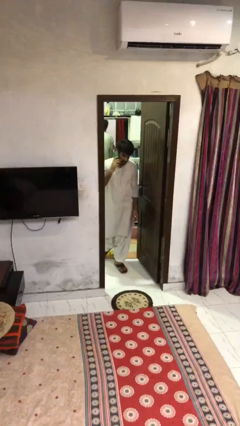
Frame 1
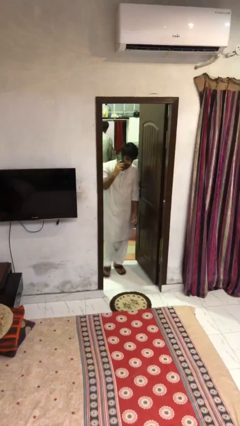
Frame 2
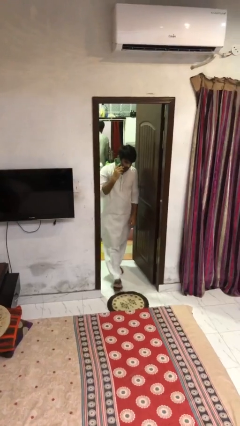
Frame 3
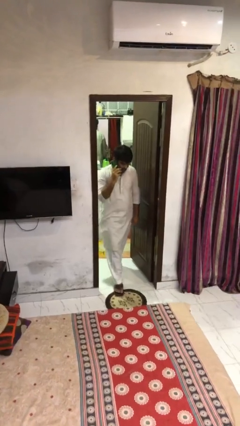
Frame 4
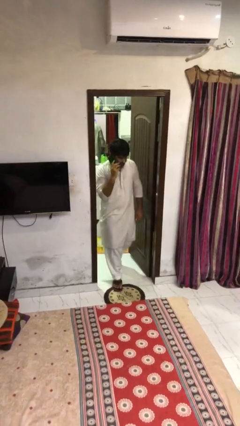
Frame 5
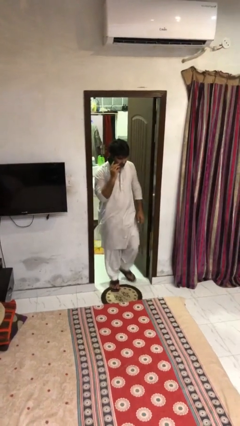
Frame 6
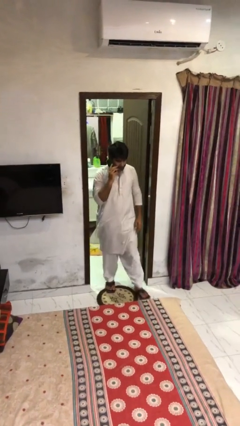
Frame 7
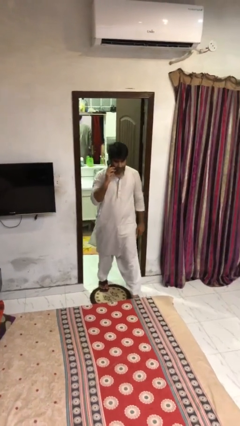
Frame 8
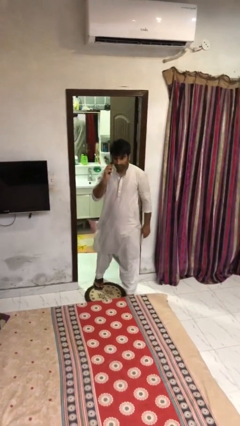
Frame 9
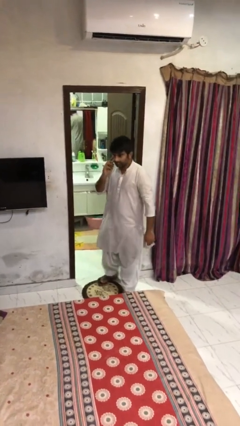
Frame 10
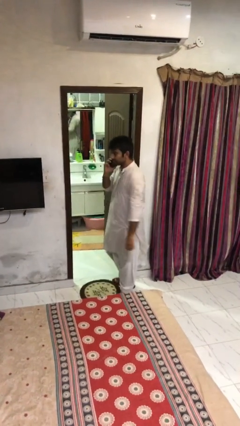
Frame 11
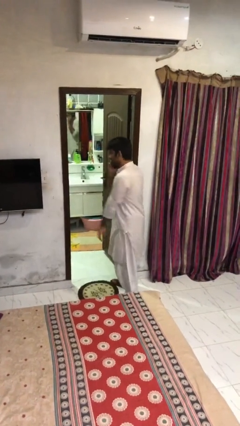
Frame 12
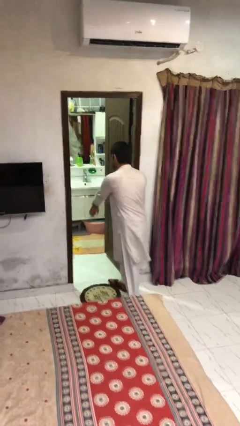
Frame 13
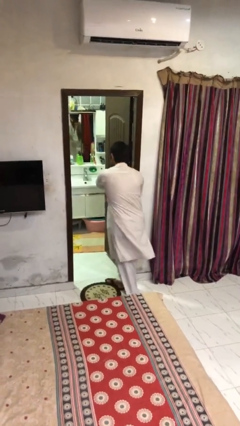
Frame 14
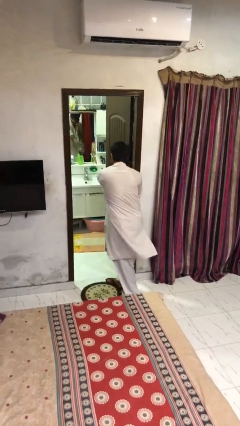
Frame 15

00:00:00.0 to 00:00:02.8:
person enters scene through structure

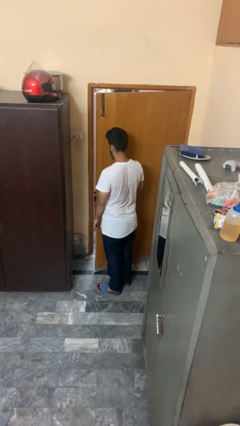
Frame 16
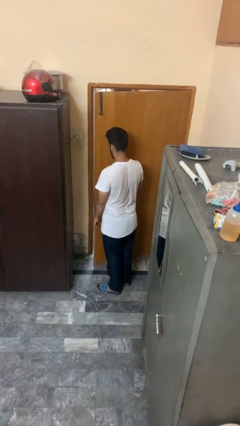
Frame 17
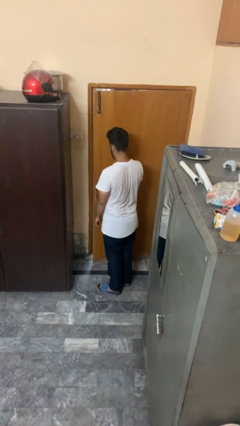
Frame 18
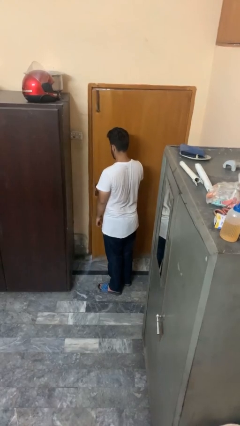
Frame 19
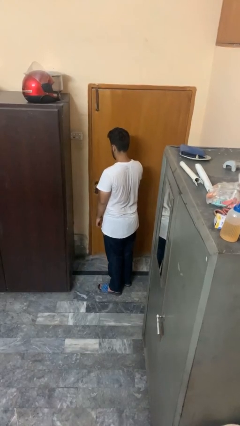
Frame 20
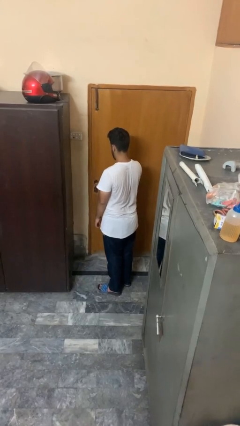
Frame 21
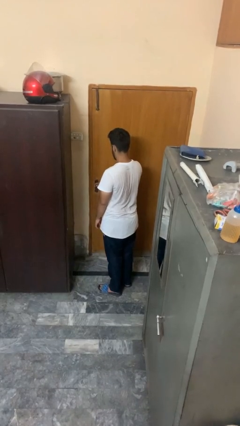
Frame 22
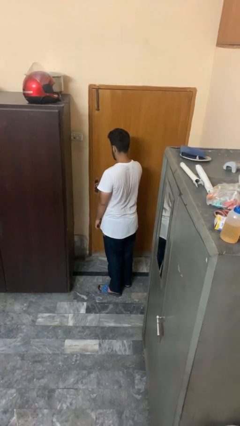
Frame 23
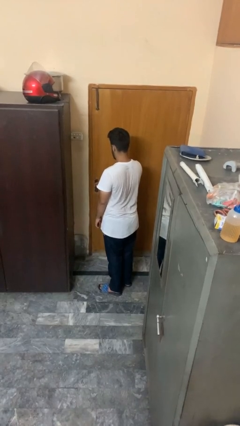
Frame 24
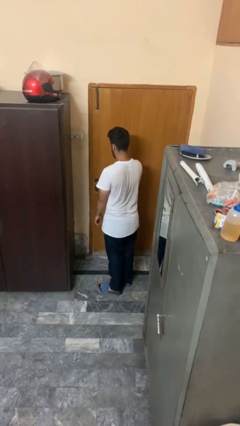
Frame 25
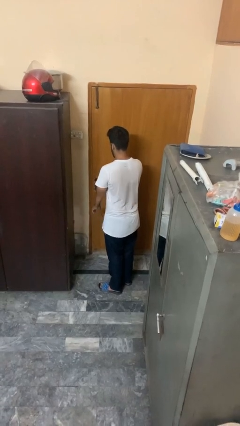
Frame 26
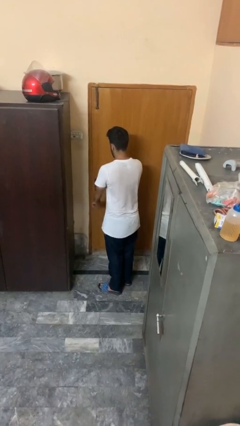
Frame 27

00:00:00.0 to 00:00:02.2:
person closes facility door

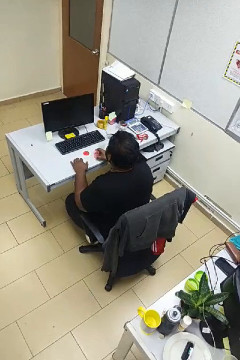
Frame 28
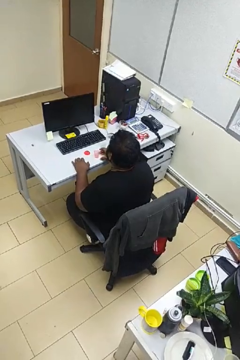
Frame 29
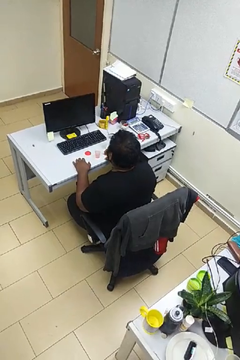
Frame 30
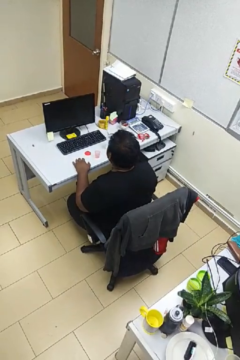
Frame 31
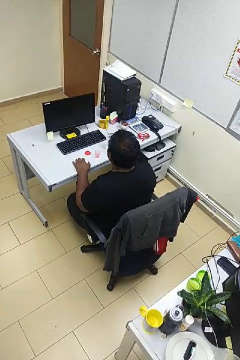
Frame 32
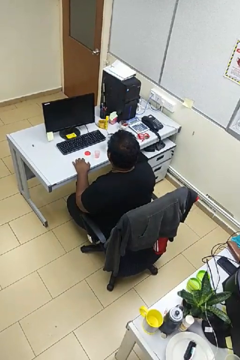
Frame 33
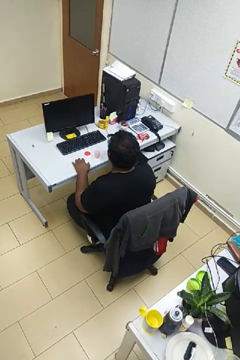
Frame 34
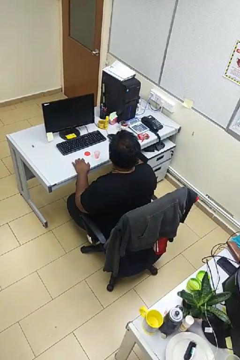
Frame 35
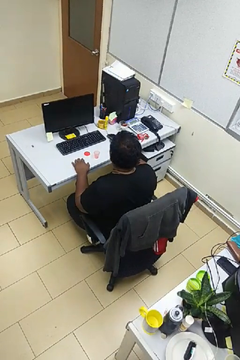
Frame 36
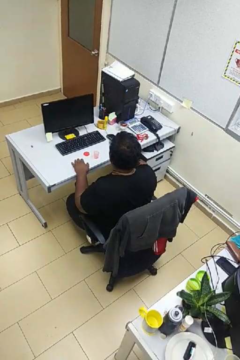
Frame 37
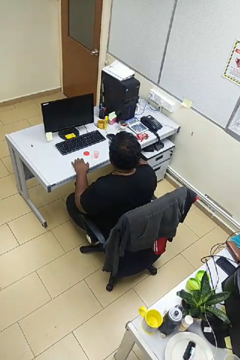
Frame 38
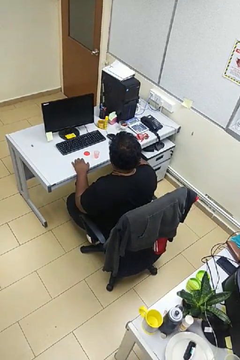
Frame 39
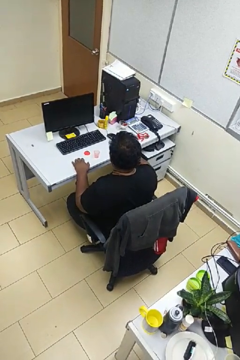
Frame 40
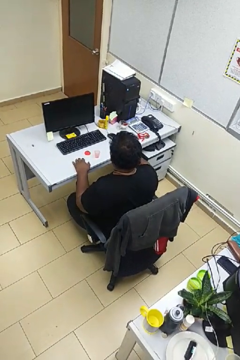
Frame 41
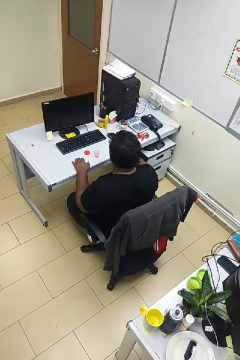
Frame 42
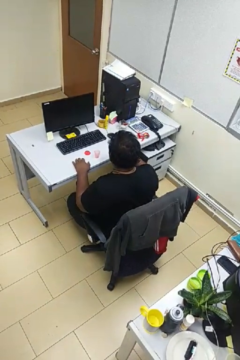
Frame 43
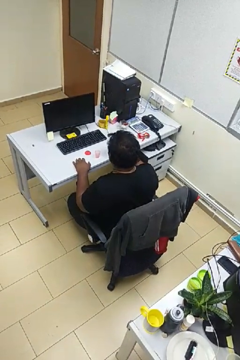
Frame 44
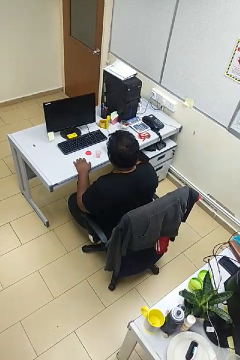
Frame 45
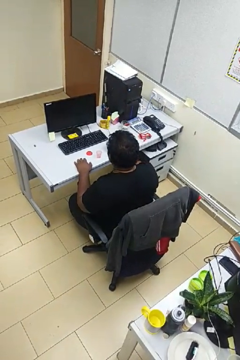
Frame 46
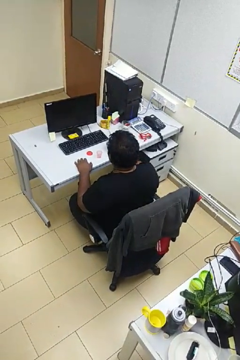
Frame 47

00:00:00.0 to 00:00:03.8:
person drinks from cup

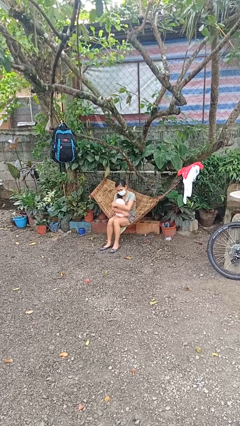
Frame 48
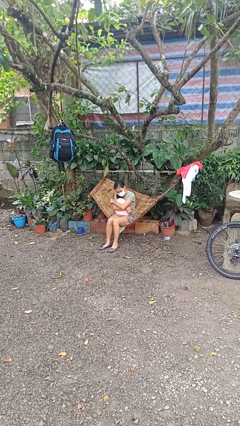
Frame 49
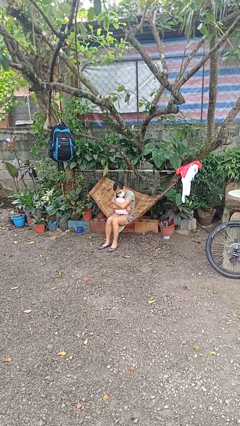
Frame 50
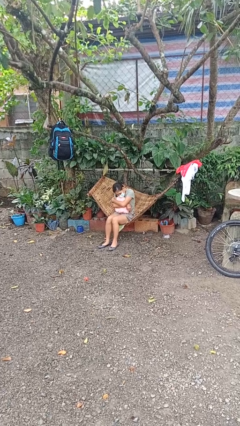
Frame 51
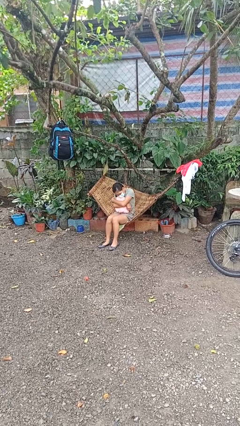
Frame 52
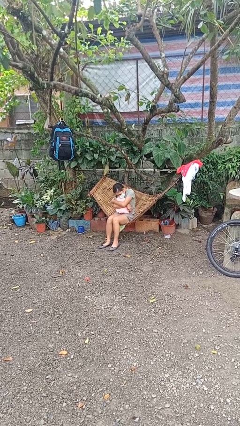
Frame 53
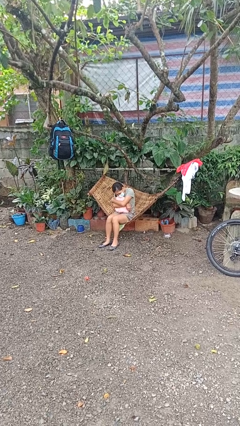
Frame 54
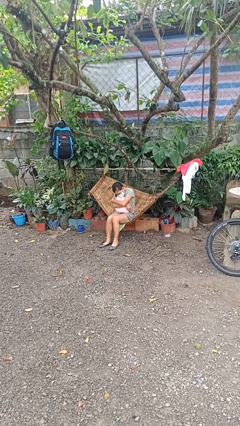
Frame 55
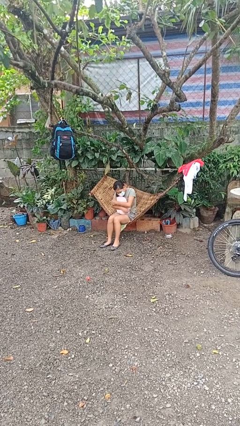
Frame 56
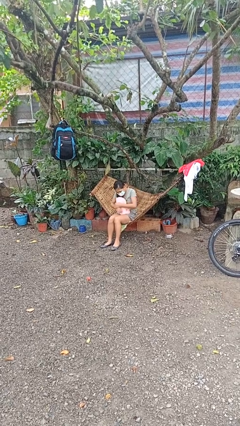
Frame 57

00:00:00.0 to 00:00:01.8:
person hugs stuffed animal

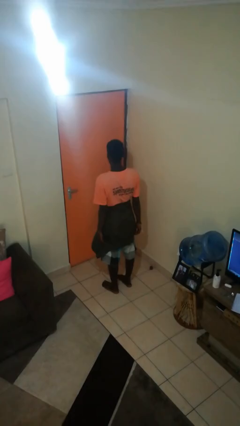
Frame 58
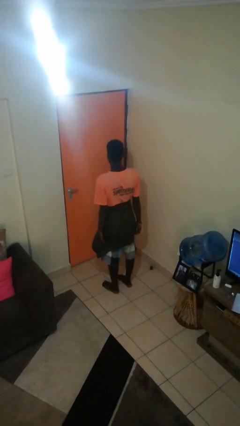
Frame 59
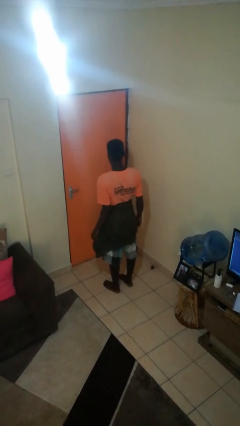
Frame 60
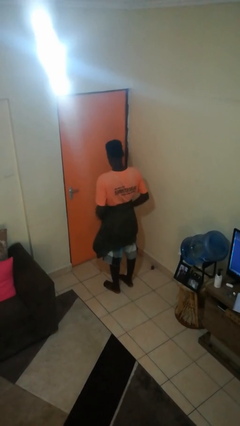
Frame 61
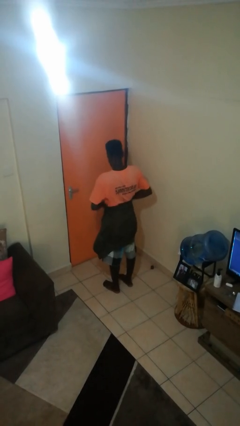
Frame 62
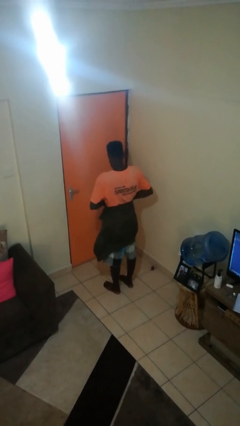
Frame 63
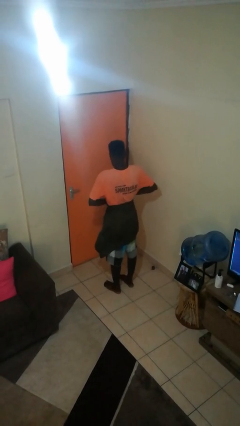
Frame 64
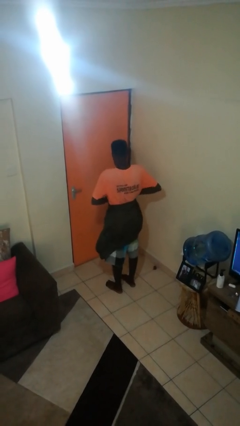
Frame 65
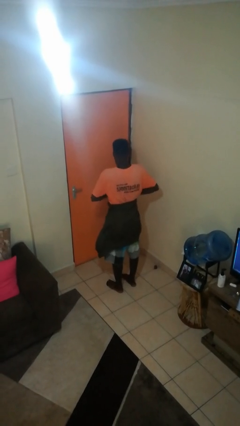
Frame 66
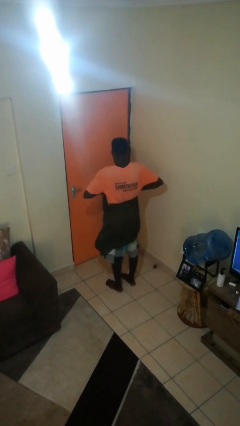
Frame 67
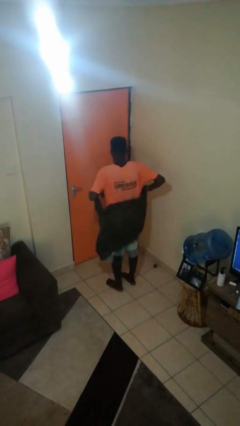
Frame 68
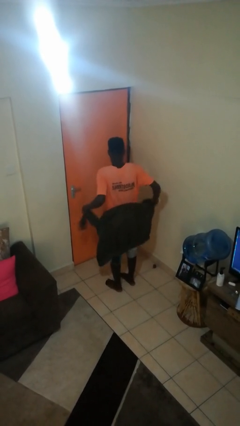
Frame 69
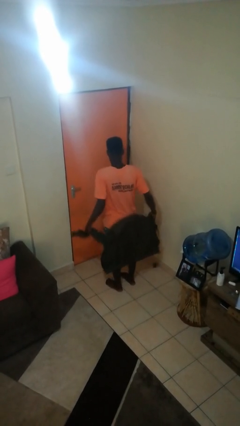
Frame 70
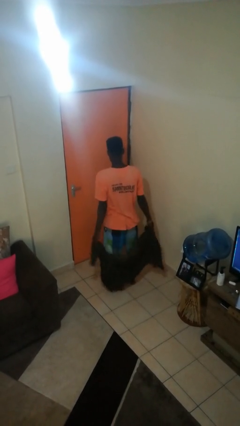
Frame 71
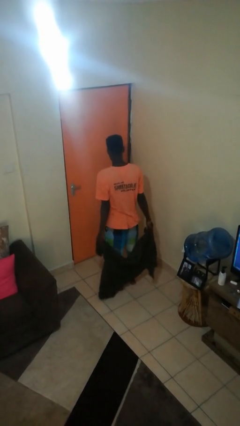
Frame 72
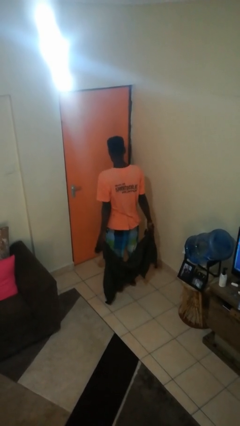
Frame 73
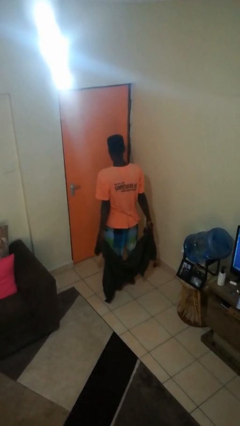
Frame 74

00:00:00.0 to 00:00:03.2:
person unties jacket around waist

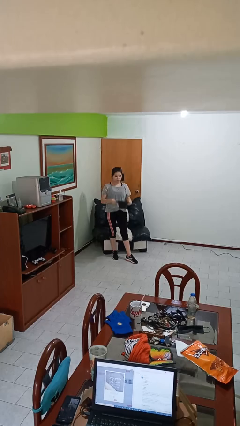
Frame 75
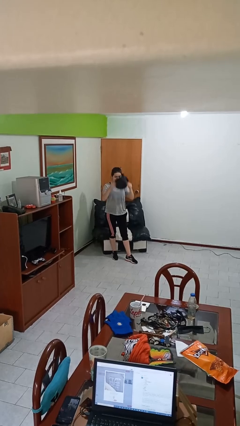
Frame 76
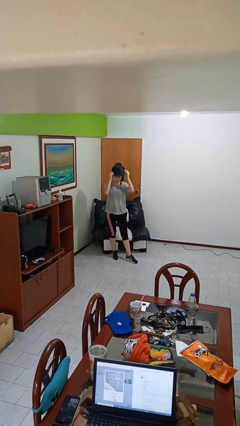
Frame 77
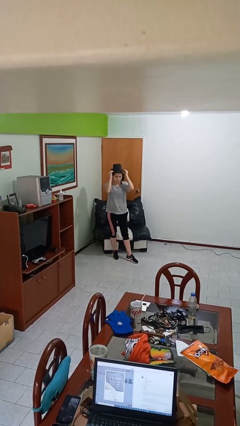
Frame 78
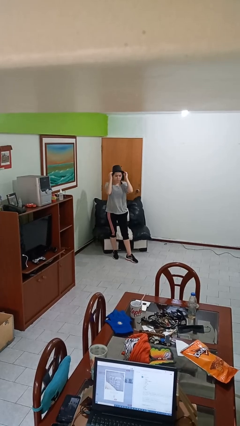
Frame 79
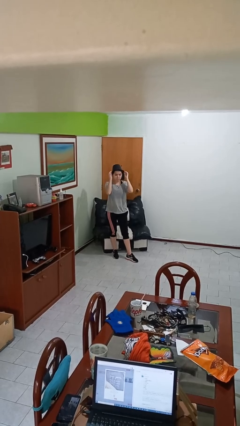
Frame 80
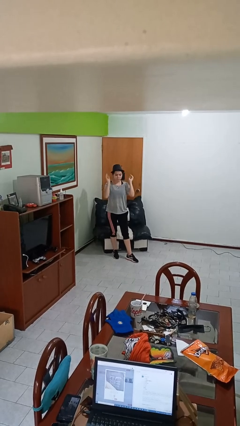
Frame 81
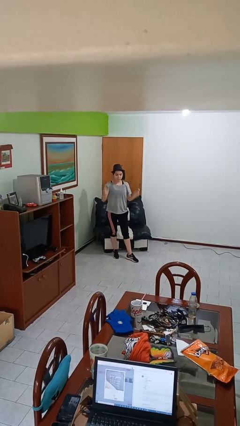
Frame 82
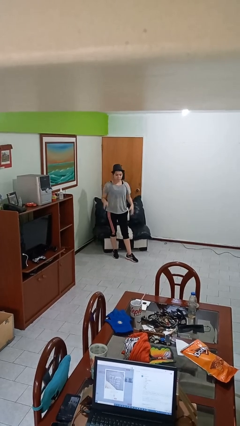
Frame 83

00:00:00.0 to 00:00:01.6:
person puts on hat

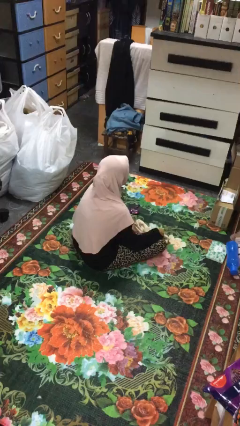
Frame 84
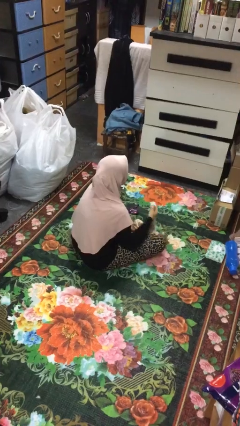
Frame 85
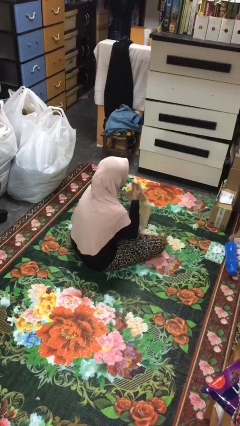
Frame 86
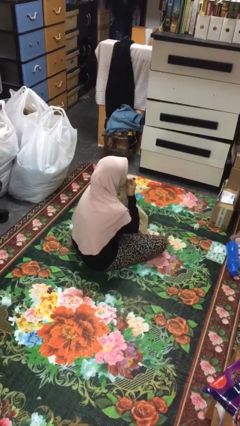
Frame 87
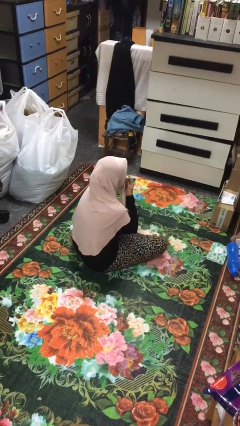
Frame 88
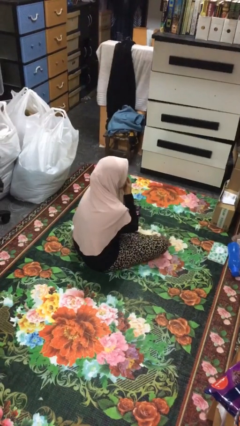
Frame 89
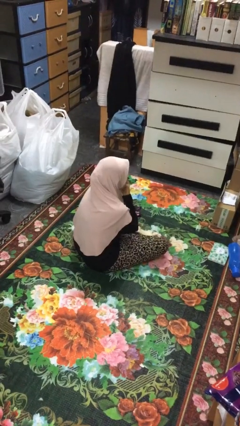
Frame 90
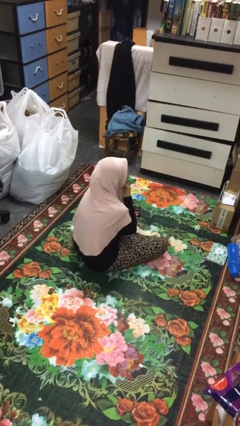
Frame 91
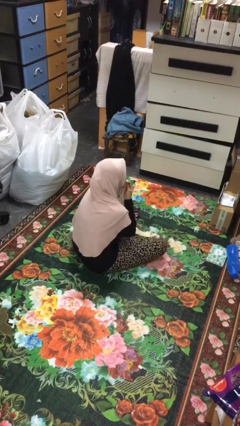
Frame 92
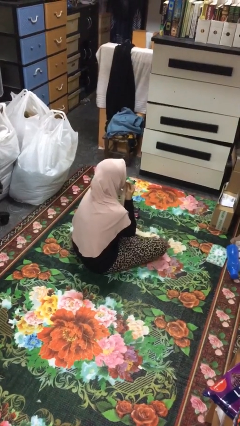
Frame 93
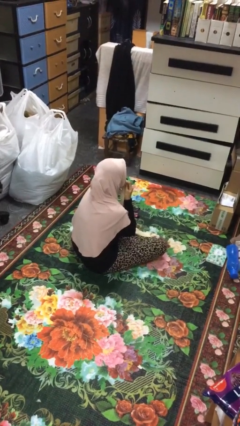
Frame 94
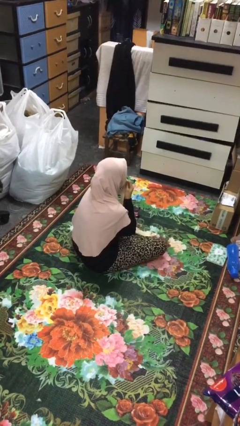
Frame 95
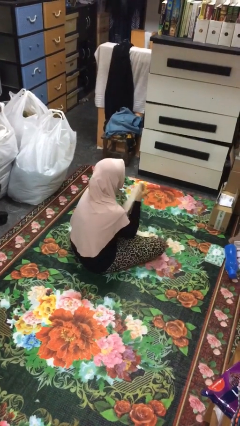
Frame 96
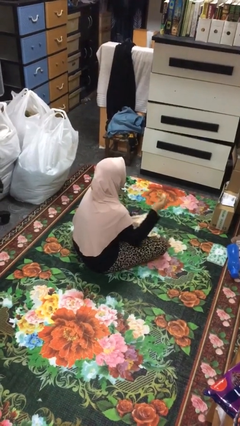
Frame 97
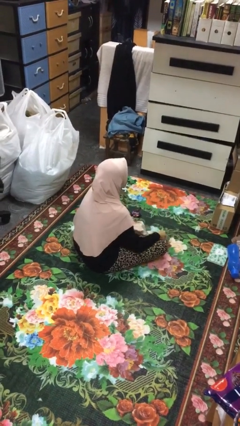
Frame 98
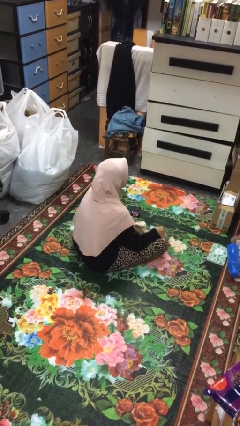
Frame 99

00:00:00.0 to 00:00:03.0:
person wipes mouth with napkin
